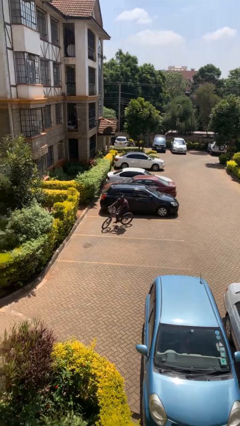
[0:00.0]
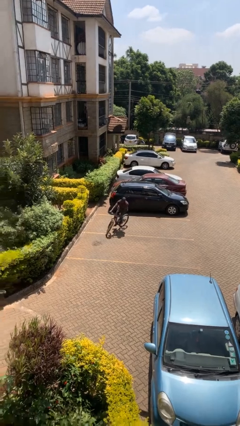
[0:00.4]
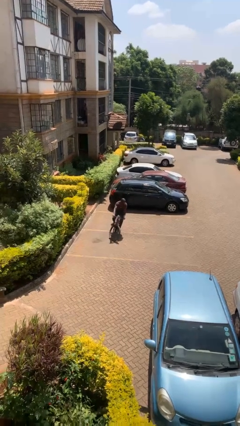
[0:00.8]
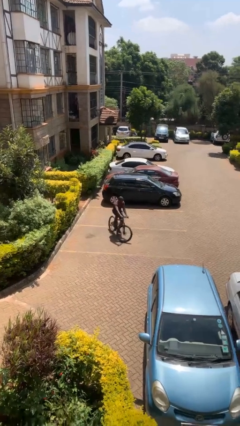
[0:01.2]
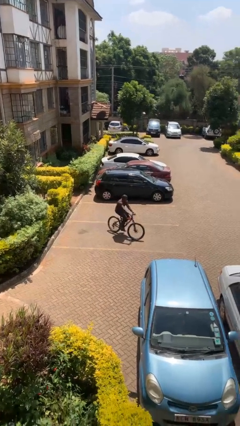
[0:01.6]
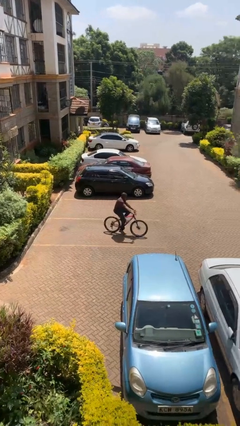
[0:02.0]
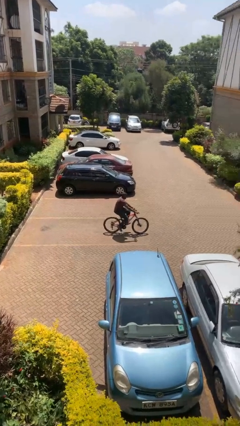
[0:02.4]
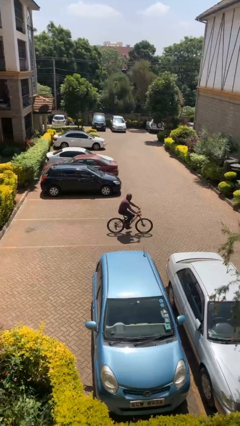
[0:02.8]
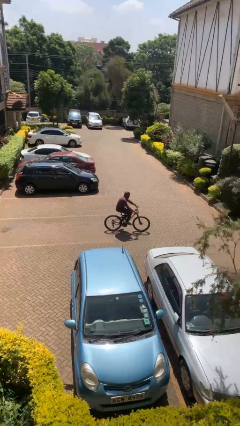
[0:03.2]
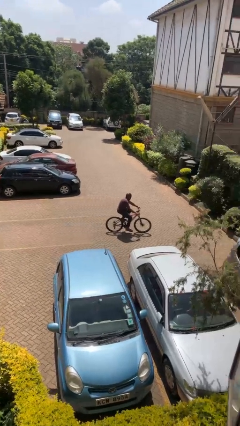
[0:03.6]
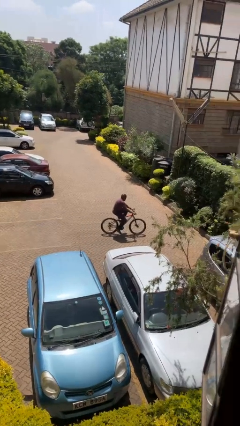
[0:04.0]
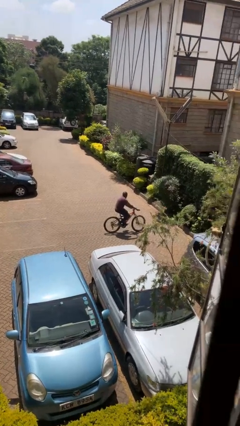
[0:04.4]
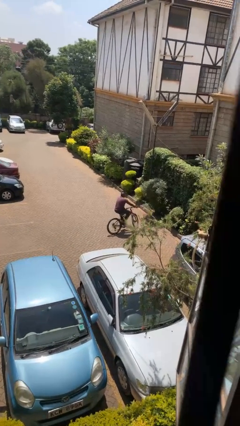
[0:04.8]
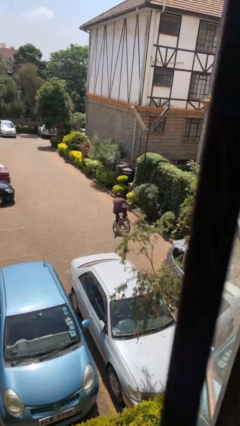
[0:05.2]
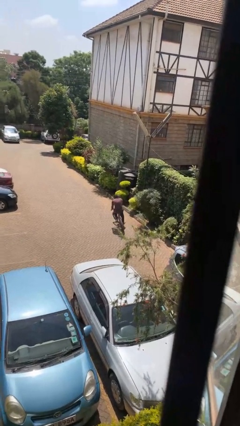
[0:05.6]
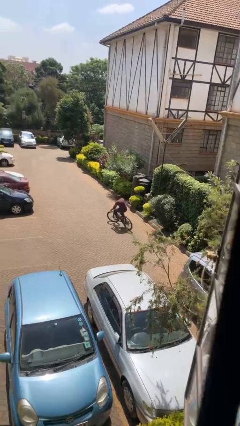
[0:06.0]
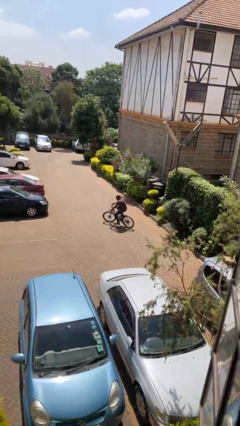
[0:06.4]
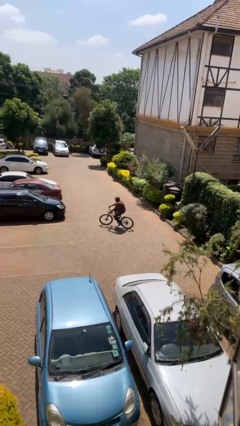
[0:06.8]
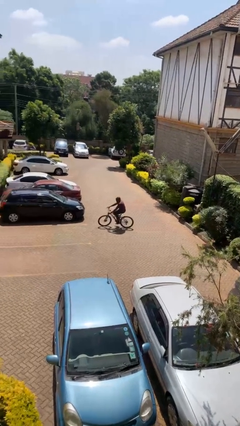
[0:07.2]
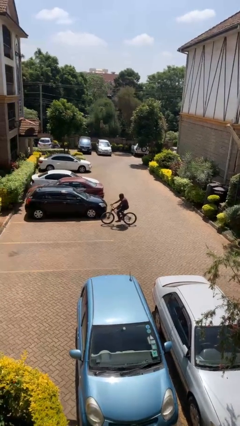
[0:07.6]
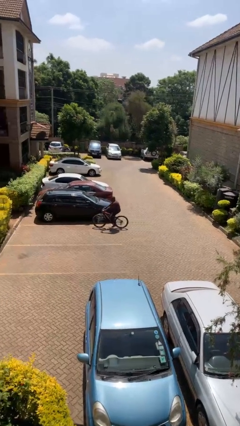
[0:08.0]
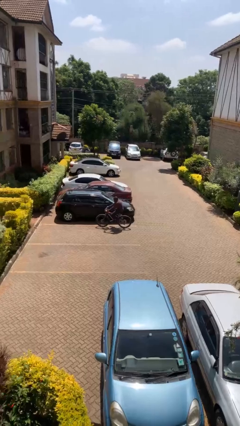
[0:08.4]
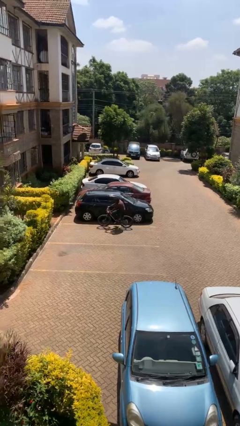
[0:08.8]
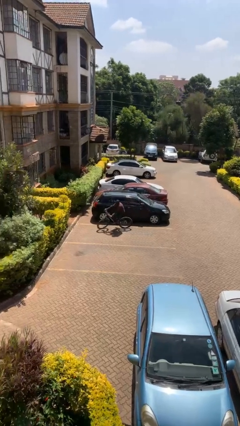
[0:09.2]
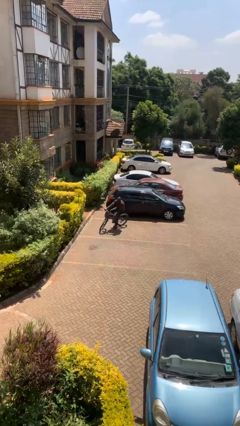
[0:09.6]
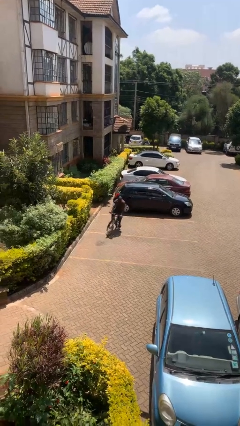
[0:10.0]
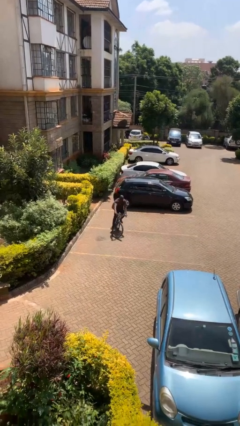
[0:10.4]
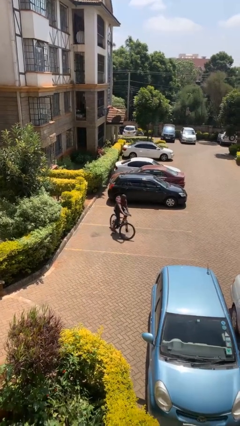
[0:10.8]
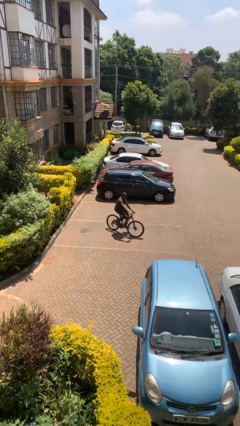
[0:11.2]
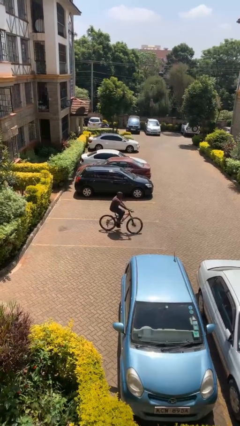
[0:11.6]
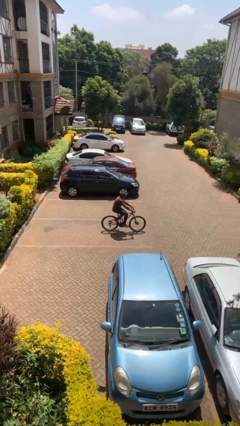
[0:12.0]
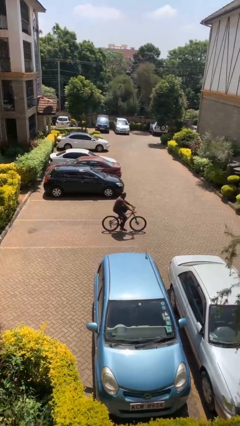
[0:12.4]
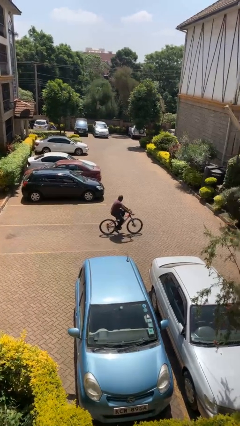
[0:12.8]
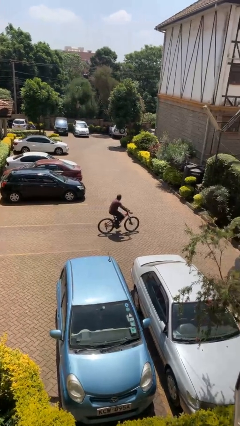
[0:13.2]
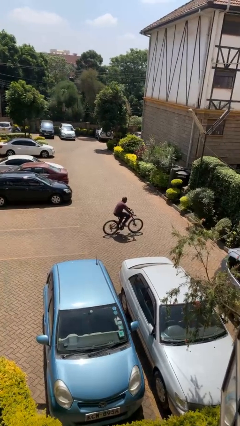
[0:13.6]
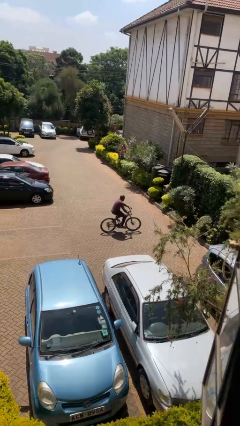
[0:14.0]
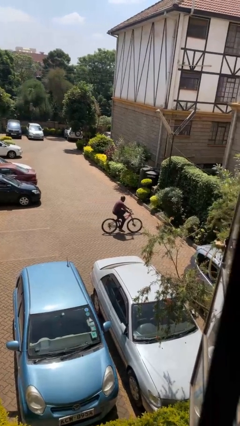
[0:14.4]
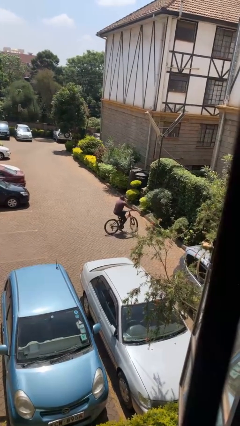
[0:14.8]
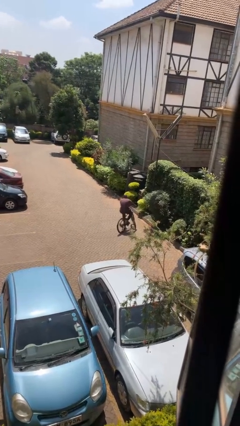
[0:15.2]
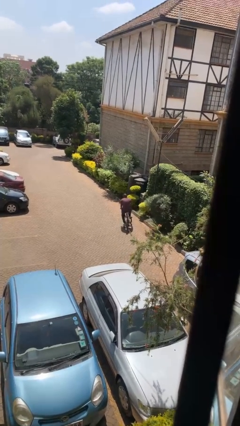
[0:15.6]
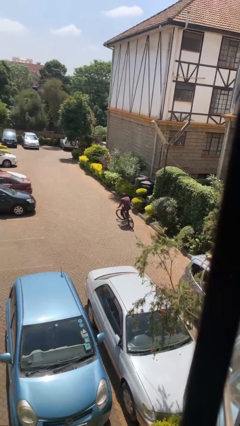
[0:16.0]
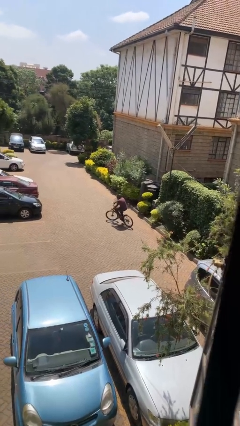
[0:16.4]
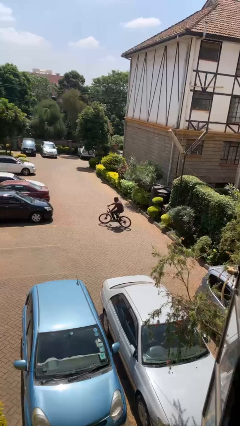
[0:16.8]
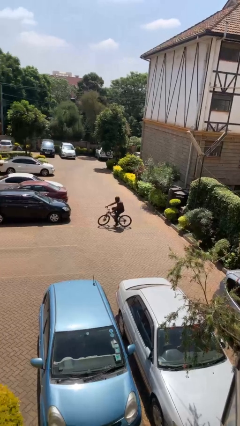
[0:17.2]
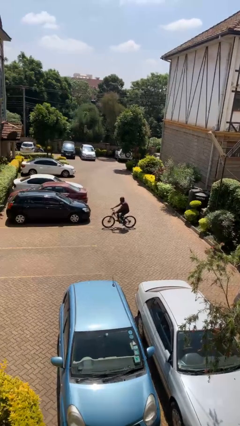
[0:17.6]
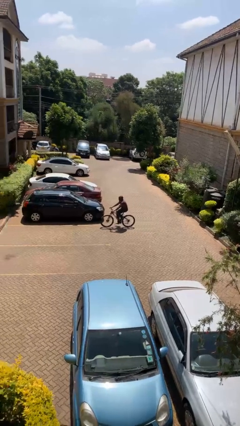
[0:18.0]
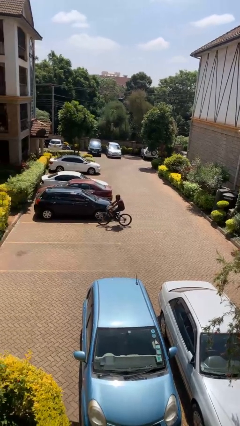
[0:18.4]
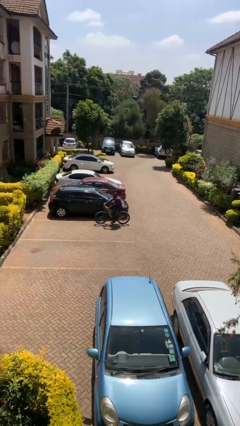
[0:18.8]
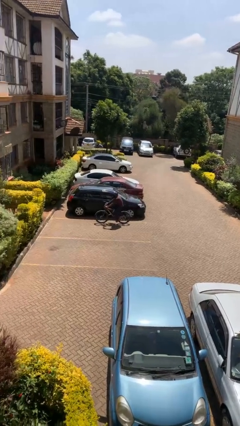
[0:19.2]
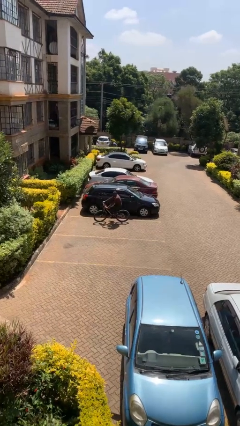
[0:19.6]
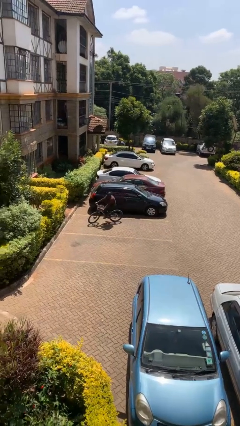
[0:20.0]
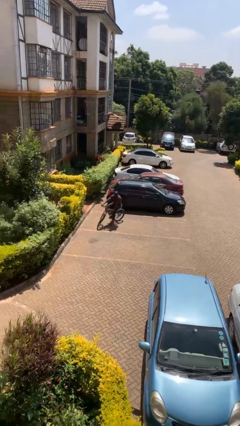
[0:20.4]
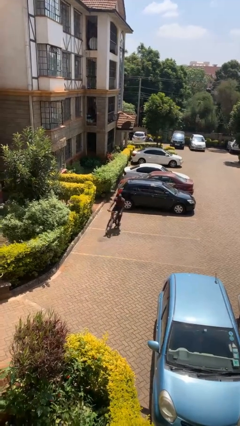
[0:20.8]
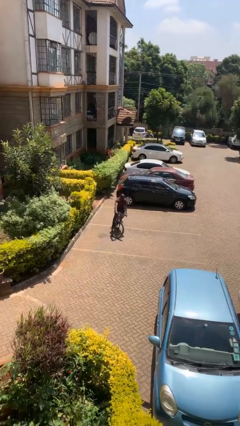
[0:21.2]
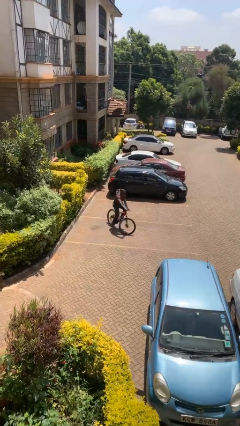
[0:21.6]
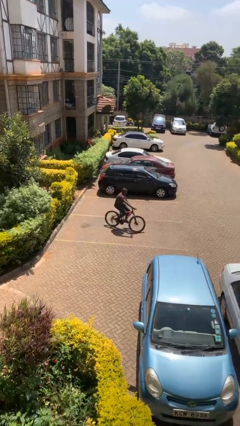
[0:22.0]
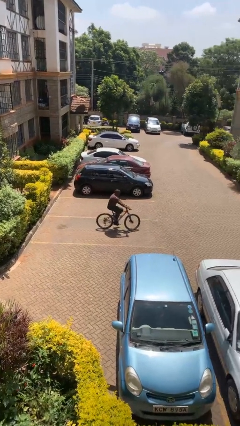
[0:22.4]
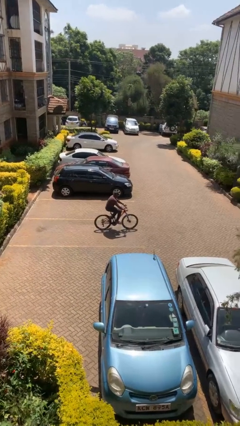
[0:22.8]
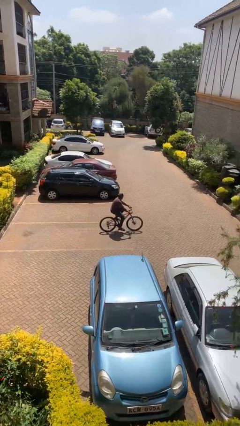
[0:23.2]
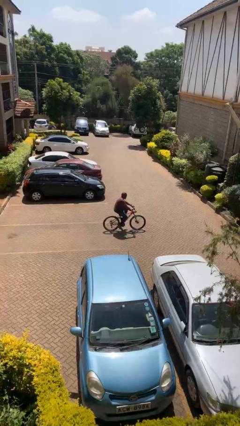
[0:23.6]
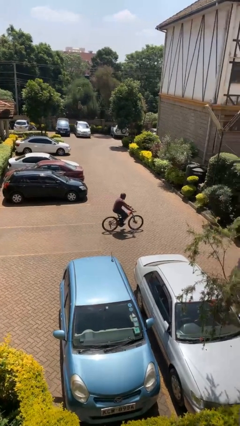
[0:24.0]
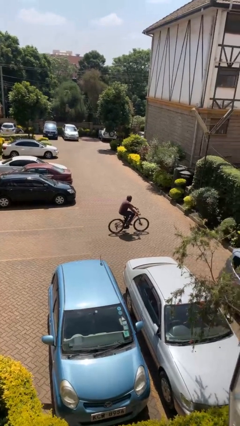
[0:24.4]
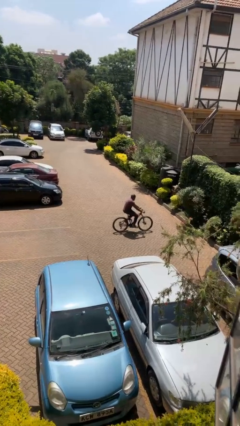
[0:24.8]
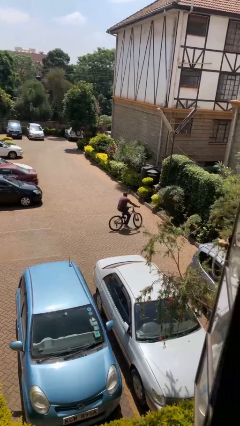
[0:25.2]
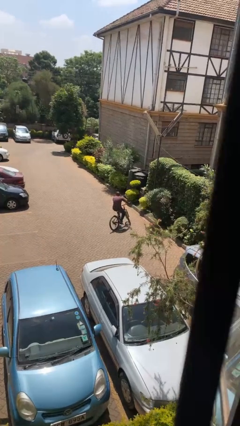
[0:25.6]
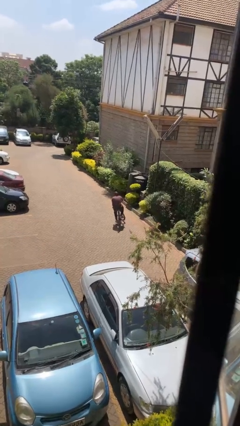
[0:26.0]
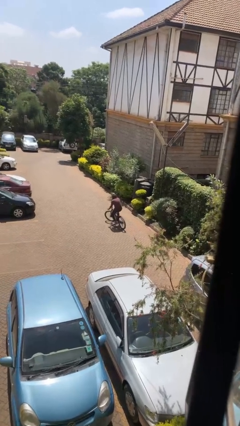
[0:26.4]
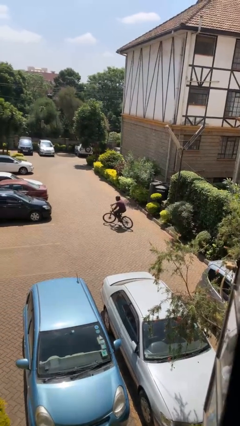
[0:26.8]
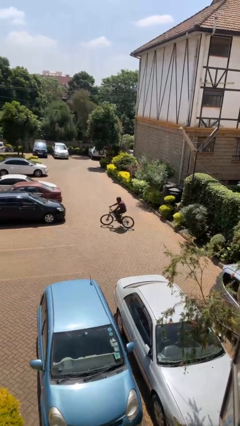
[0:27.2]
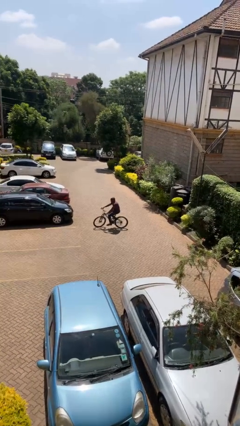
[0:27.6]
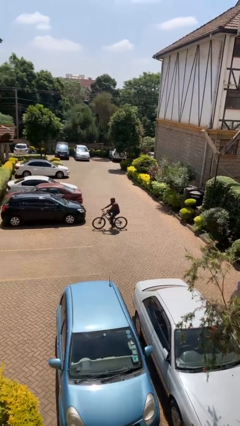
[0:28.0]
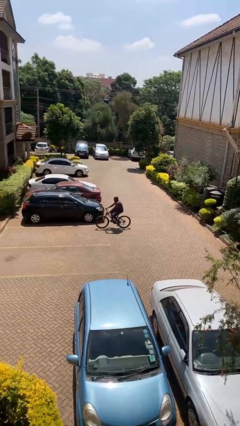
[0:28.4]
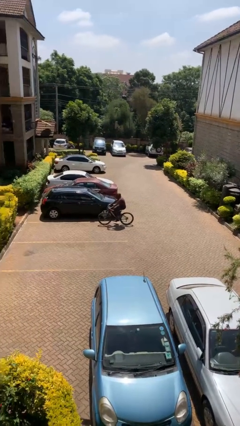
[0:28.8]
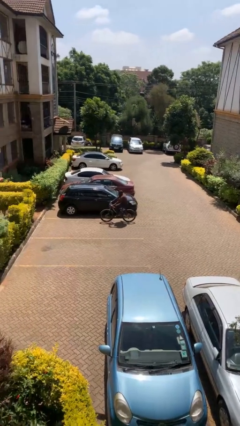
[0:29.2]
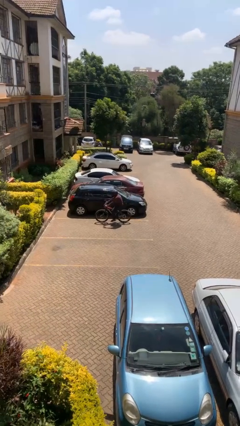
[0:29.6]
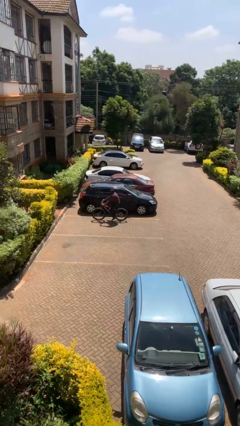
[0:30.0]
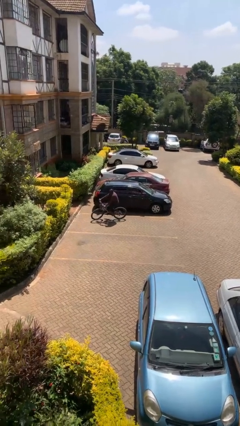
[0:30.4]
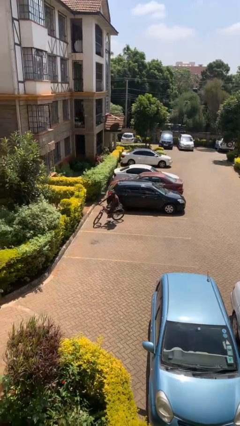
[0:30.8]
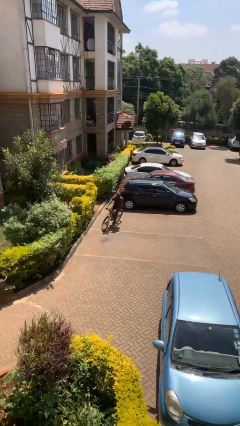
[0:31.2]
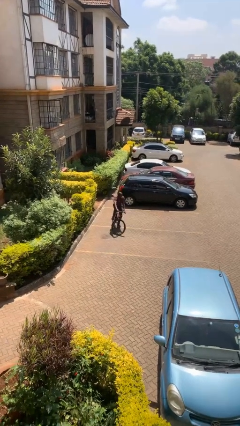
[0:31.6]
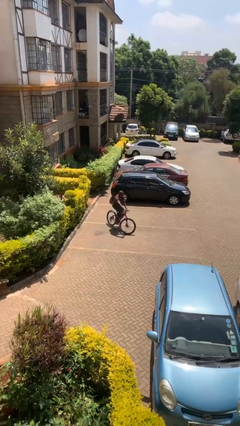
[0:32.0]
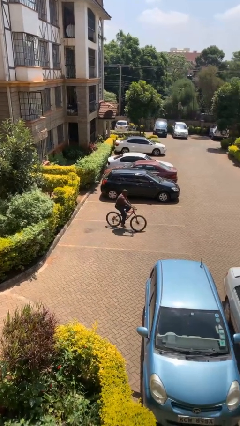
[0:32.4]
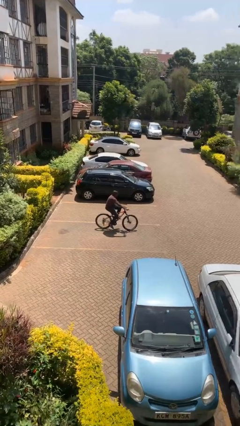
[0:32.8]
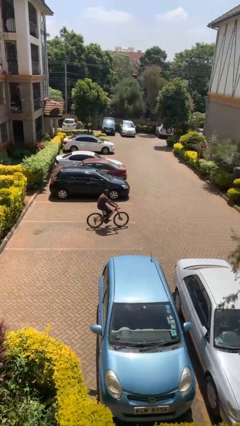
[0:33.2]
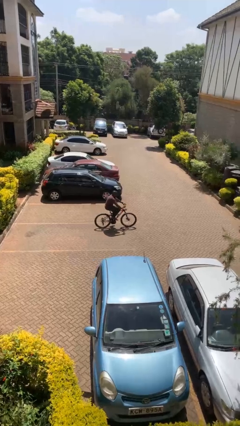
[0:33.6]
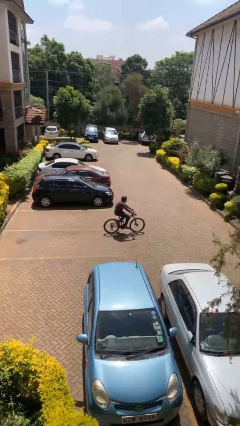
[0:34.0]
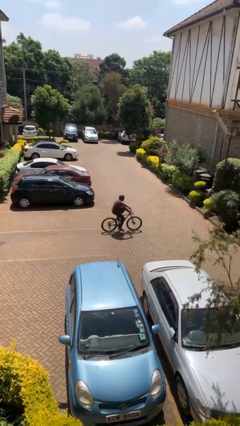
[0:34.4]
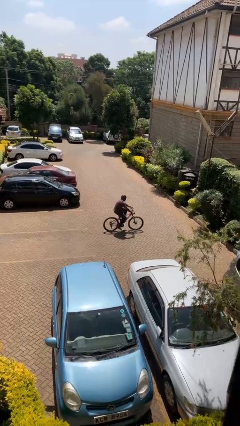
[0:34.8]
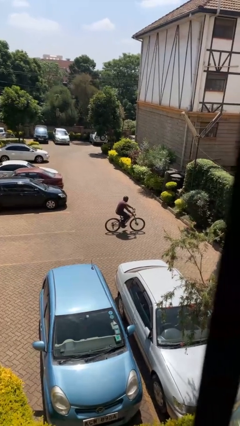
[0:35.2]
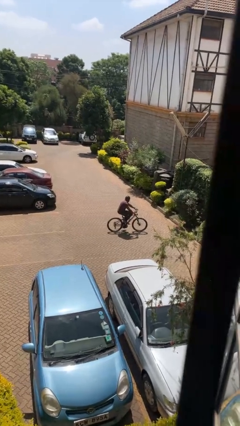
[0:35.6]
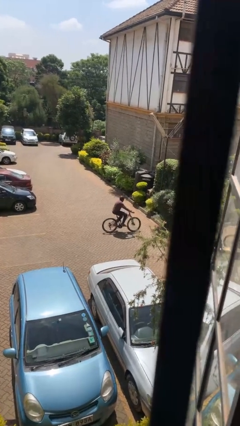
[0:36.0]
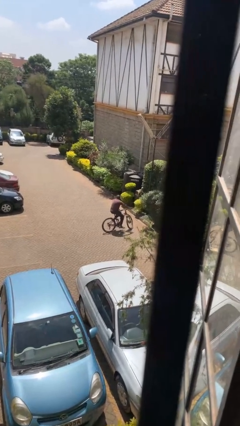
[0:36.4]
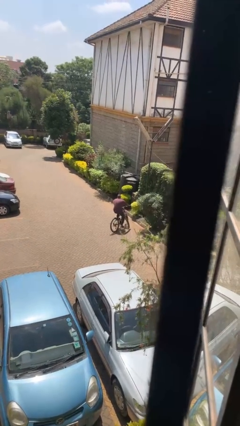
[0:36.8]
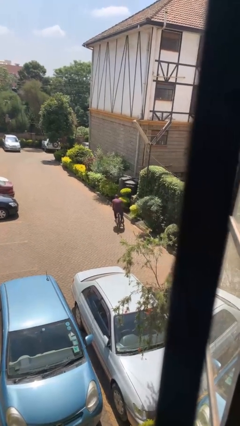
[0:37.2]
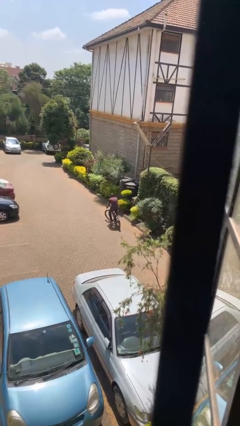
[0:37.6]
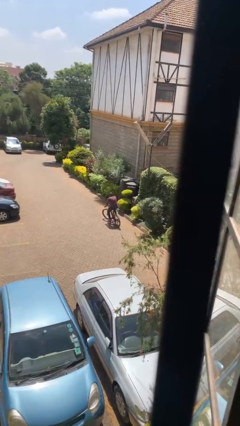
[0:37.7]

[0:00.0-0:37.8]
person rides bicycle
